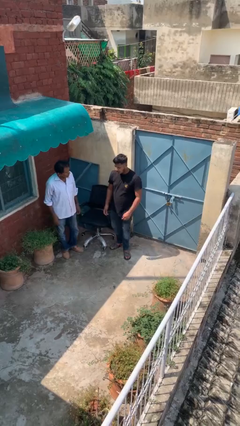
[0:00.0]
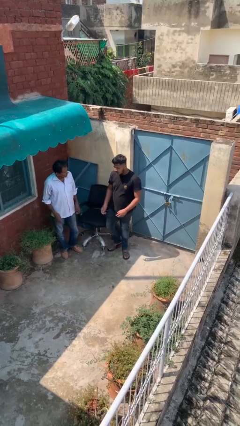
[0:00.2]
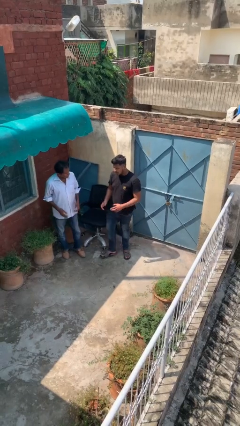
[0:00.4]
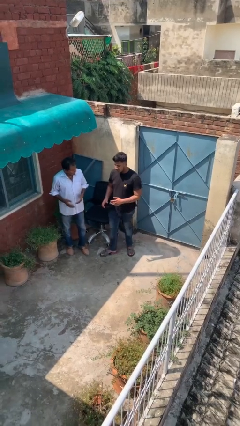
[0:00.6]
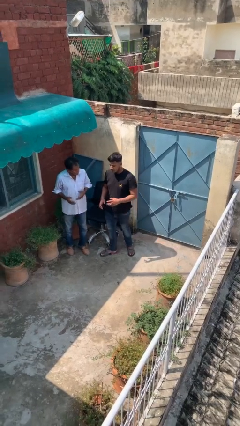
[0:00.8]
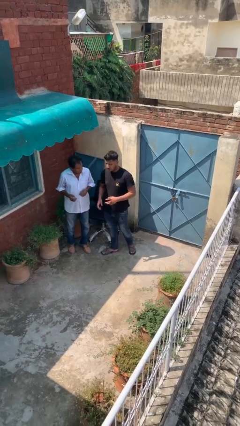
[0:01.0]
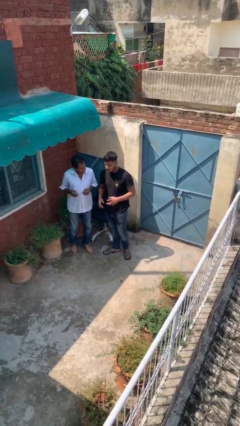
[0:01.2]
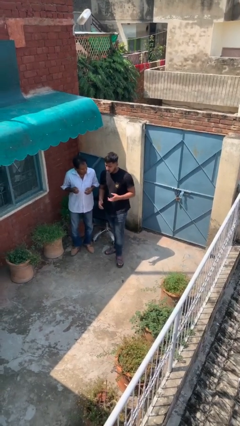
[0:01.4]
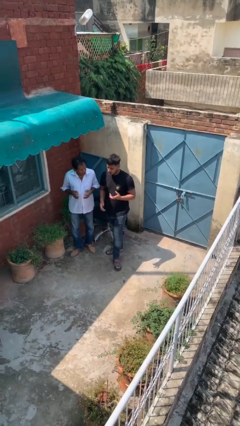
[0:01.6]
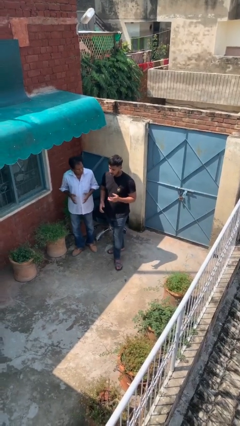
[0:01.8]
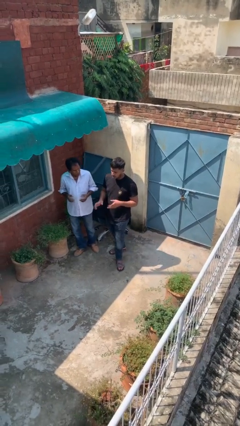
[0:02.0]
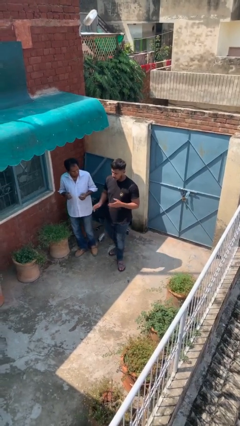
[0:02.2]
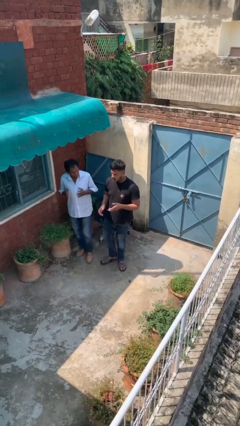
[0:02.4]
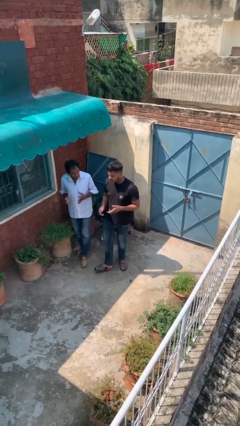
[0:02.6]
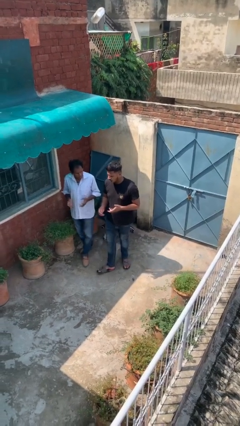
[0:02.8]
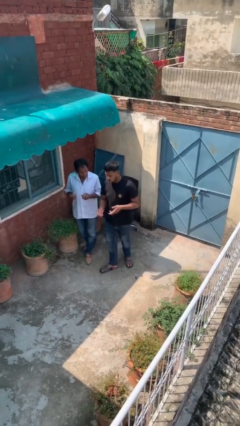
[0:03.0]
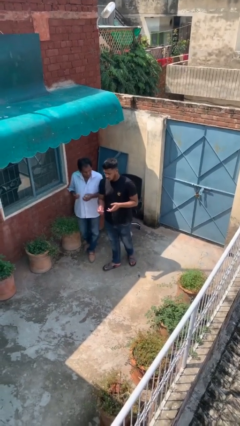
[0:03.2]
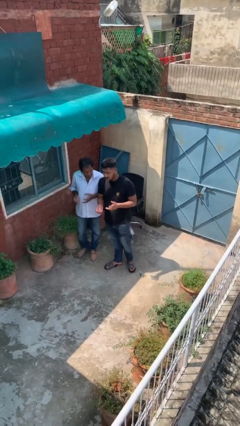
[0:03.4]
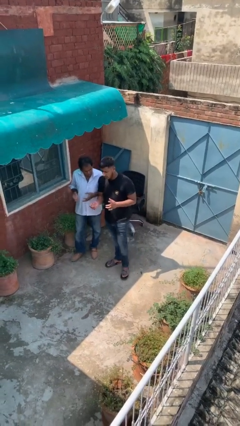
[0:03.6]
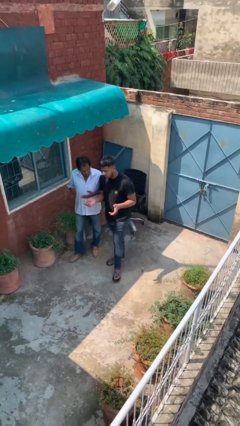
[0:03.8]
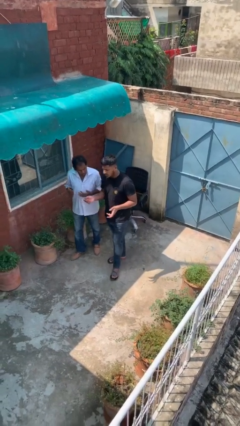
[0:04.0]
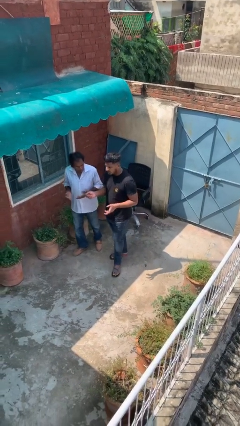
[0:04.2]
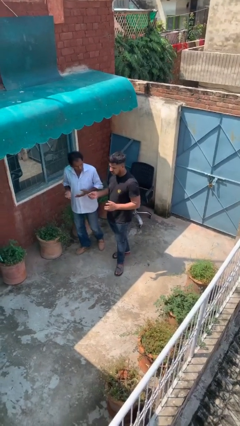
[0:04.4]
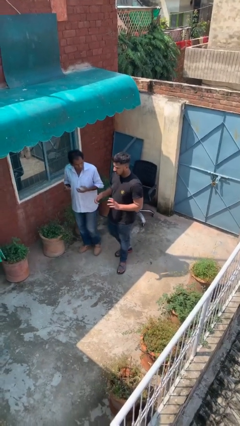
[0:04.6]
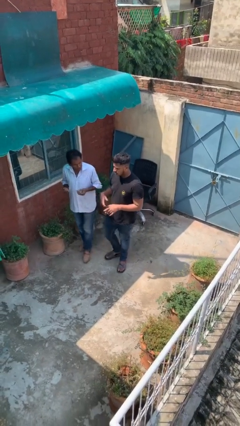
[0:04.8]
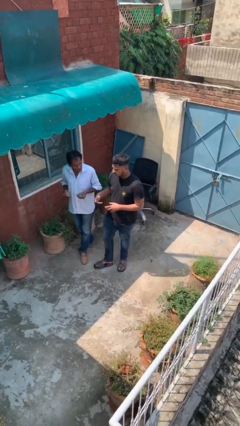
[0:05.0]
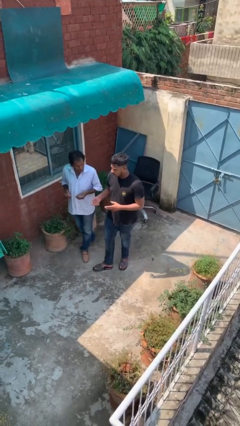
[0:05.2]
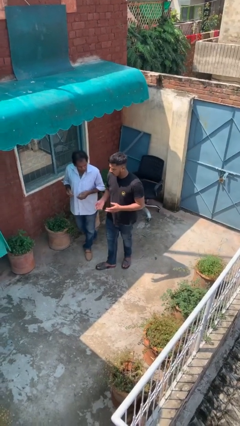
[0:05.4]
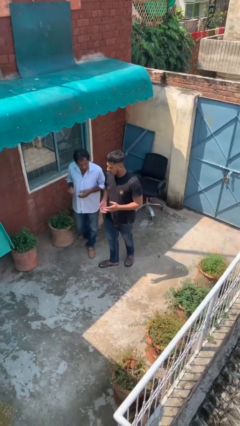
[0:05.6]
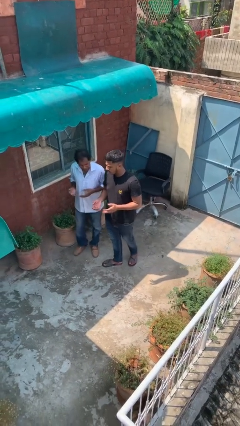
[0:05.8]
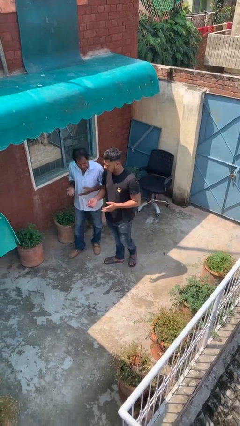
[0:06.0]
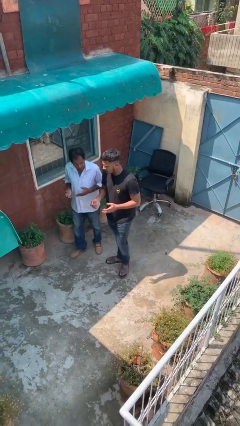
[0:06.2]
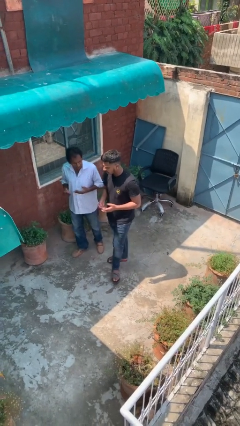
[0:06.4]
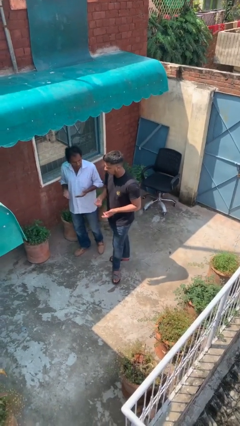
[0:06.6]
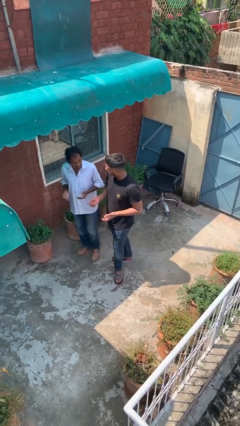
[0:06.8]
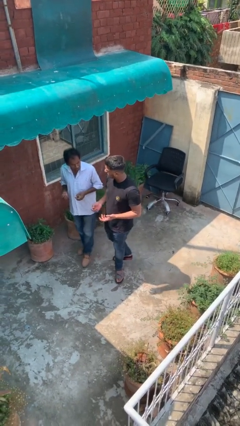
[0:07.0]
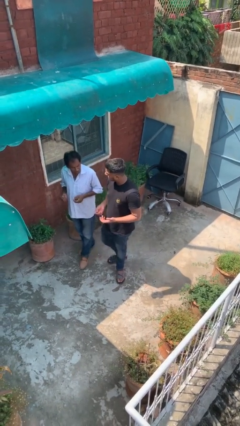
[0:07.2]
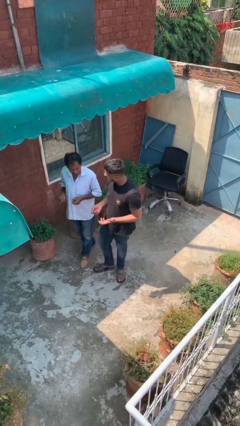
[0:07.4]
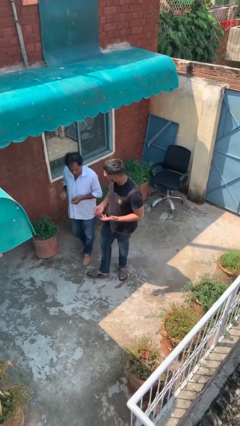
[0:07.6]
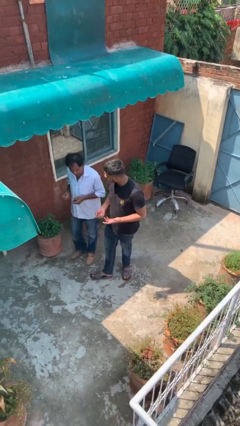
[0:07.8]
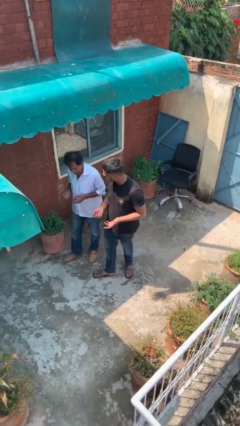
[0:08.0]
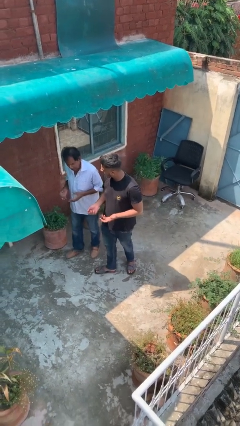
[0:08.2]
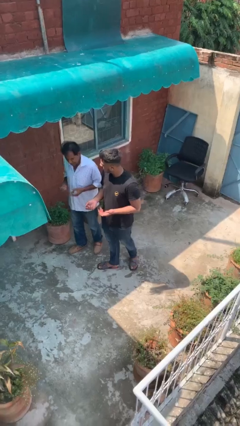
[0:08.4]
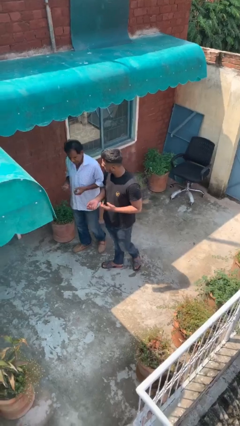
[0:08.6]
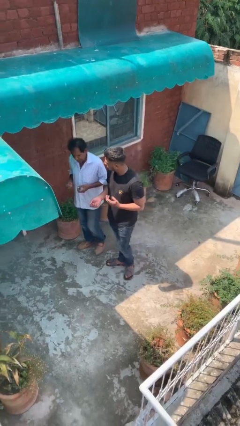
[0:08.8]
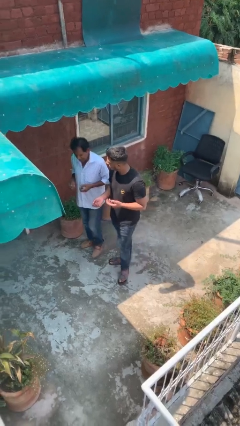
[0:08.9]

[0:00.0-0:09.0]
person talks to person

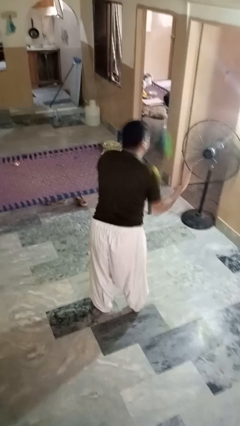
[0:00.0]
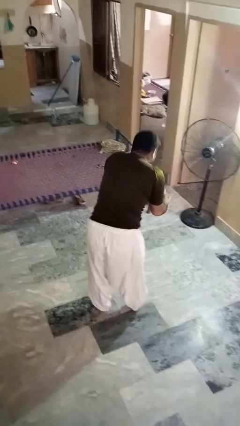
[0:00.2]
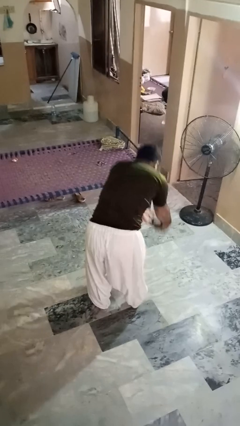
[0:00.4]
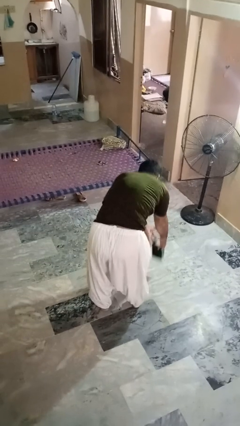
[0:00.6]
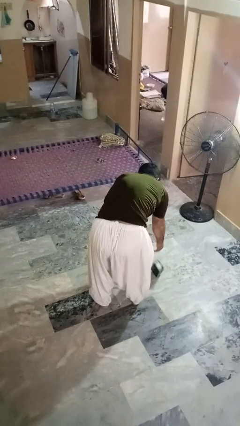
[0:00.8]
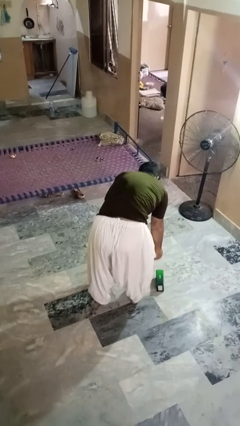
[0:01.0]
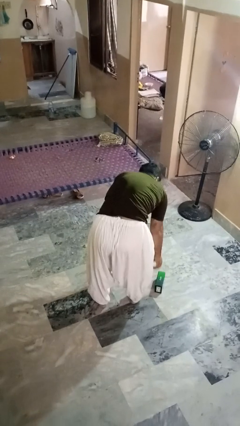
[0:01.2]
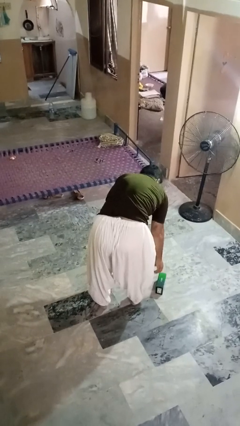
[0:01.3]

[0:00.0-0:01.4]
person catches dropped object

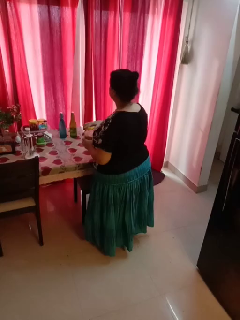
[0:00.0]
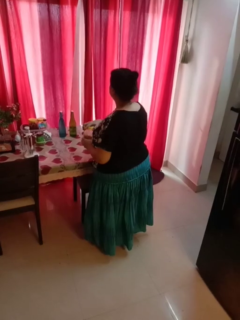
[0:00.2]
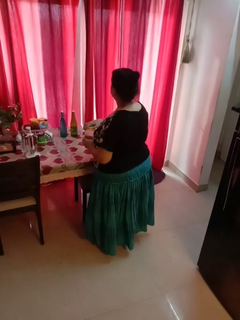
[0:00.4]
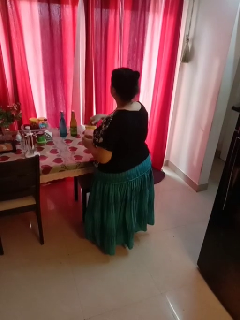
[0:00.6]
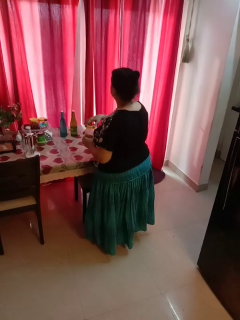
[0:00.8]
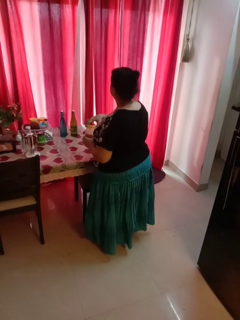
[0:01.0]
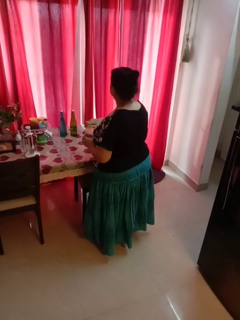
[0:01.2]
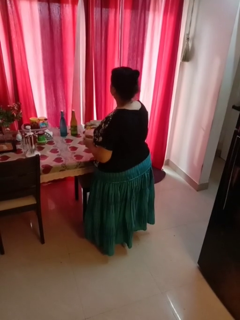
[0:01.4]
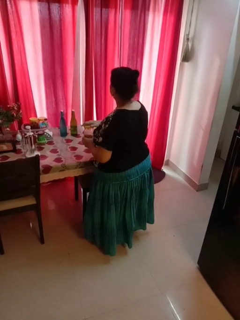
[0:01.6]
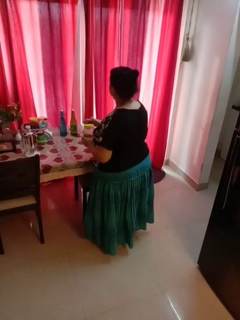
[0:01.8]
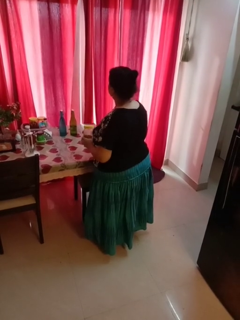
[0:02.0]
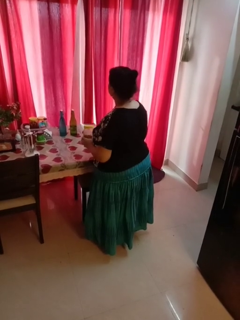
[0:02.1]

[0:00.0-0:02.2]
person closes jar

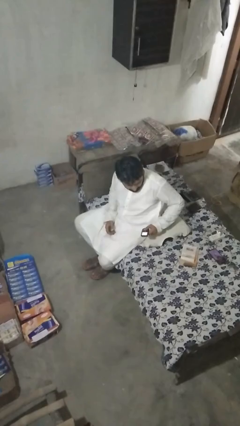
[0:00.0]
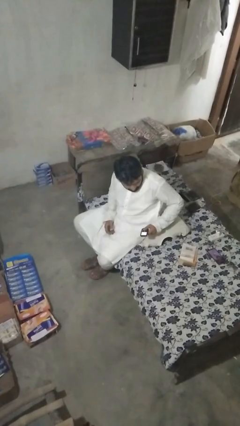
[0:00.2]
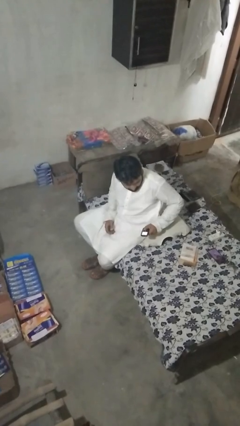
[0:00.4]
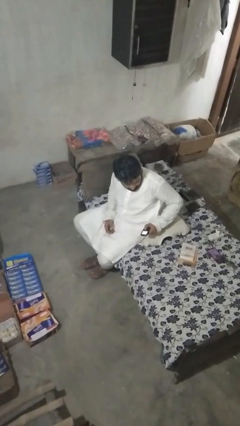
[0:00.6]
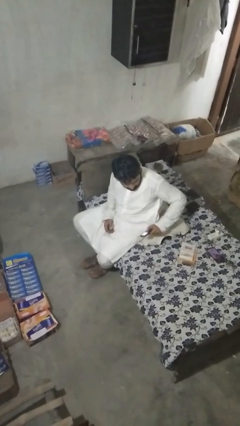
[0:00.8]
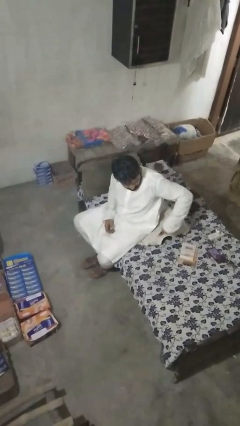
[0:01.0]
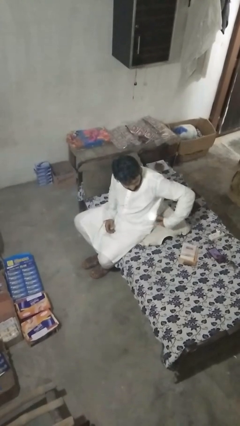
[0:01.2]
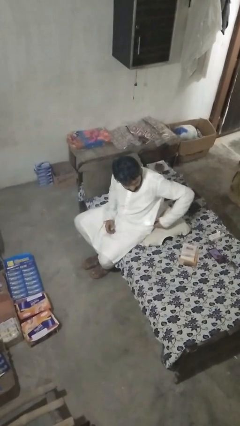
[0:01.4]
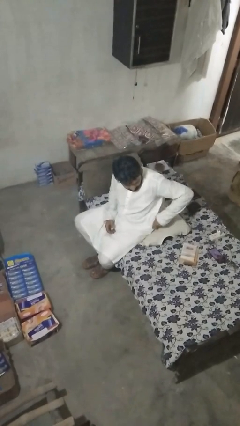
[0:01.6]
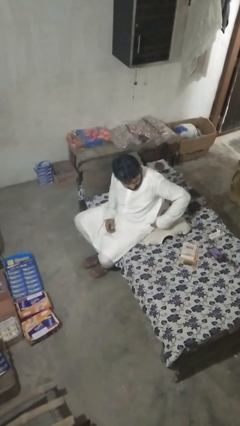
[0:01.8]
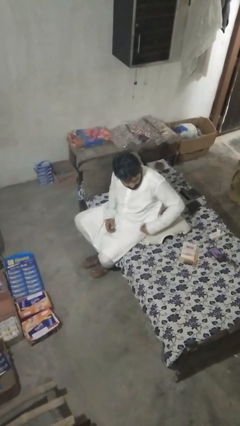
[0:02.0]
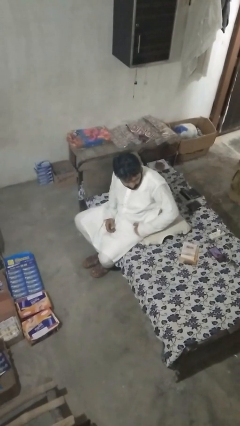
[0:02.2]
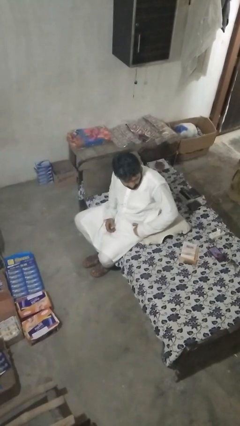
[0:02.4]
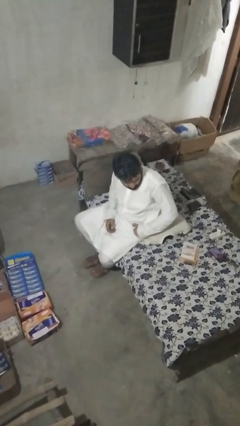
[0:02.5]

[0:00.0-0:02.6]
person puts phone into pocket

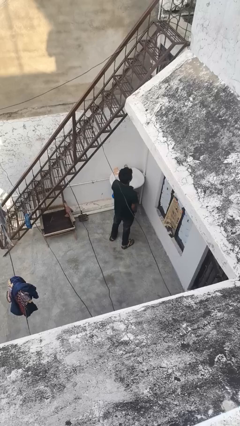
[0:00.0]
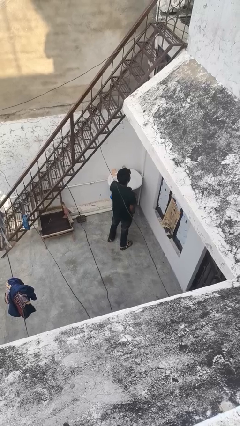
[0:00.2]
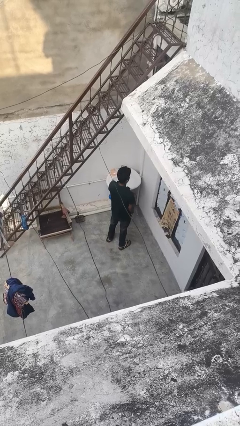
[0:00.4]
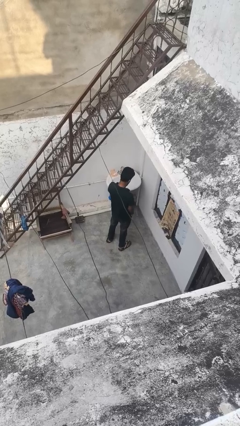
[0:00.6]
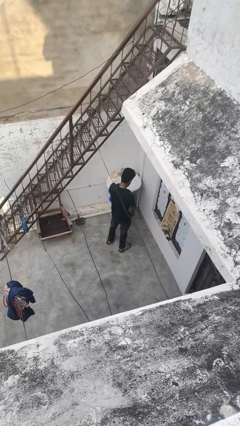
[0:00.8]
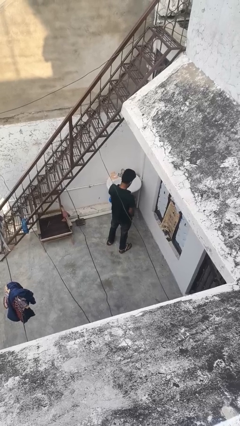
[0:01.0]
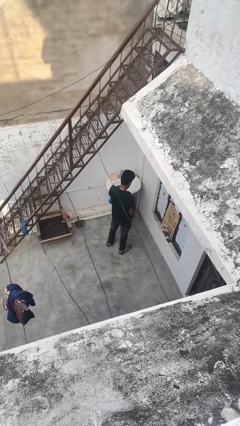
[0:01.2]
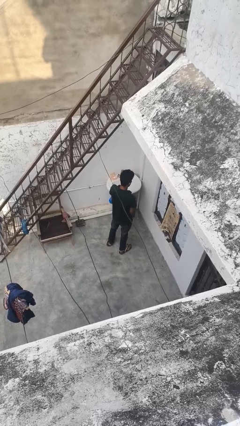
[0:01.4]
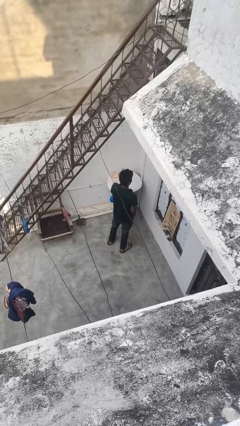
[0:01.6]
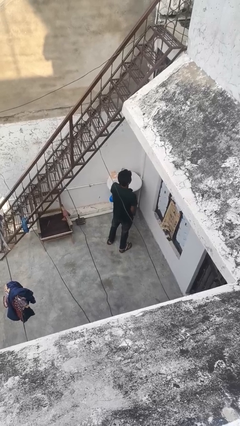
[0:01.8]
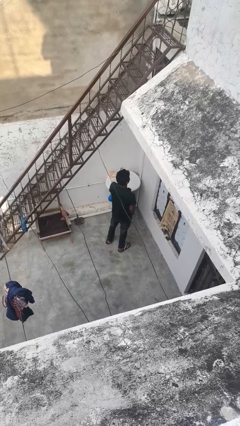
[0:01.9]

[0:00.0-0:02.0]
person strokes chin

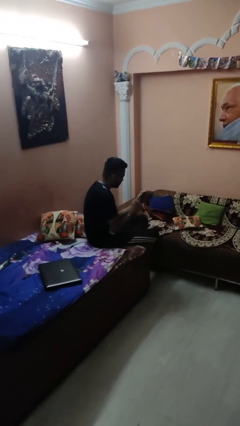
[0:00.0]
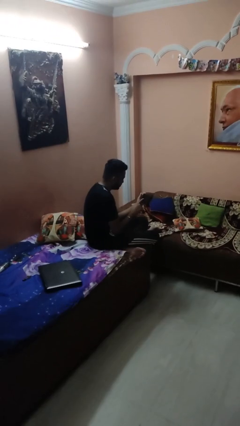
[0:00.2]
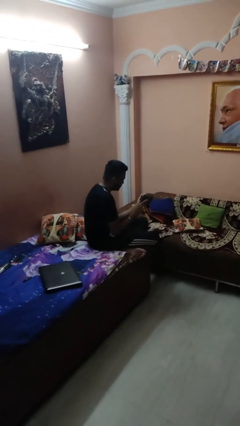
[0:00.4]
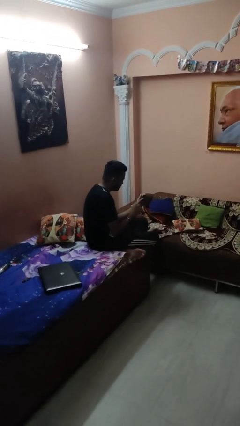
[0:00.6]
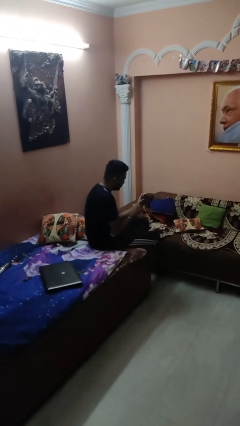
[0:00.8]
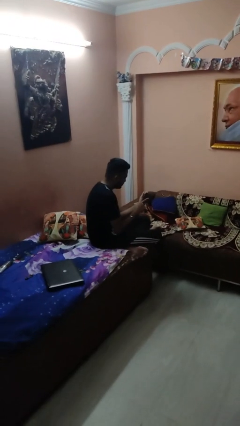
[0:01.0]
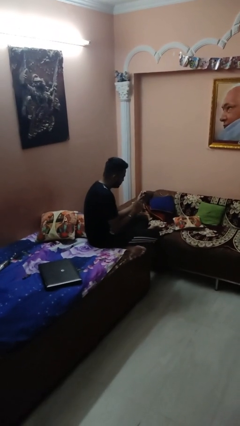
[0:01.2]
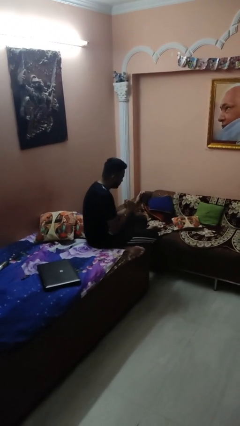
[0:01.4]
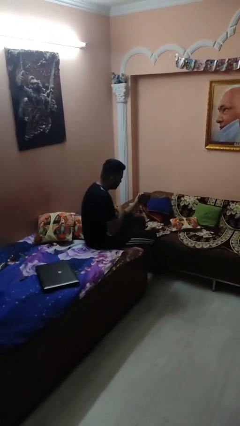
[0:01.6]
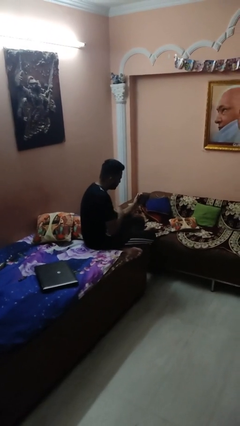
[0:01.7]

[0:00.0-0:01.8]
person interacts with tablet
